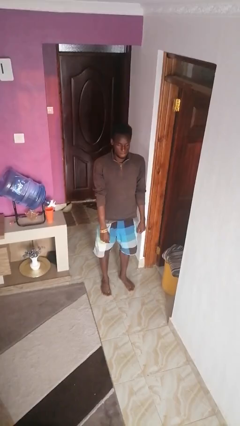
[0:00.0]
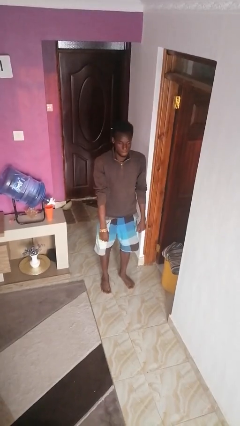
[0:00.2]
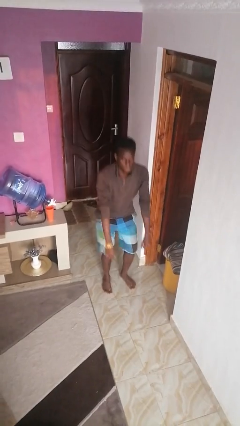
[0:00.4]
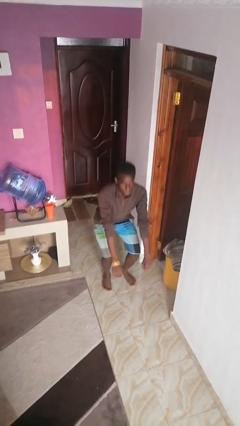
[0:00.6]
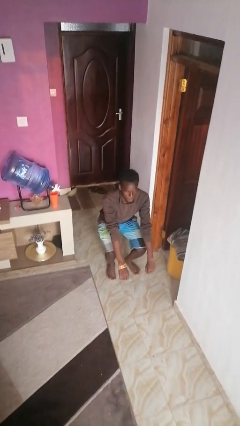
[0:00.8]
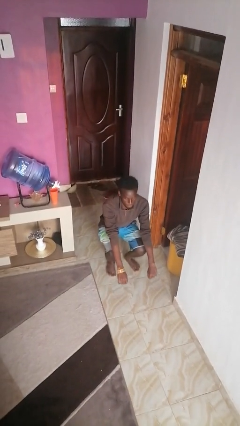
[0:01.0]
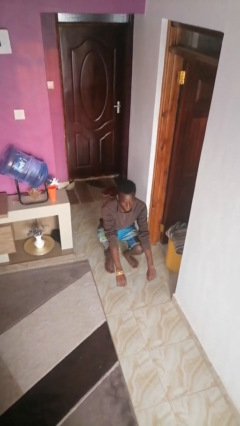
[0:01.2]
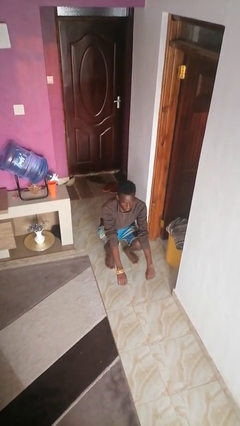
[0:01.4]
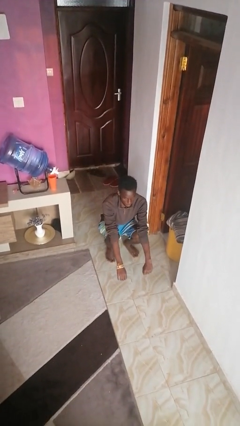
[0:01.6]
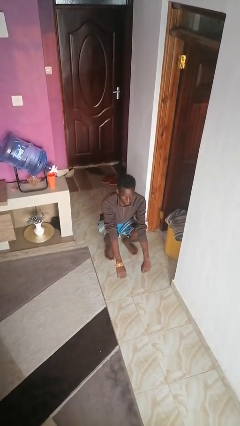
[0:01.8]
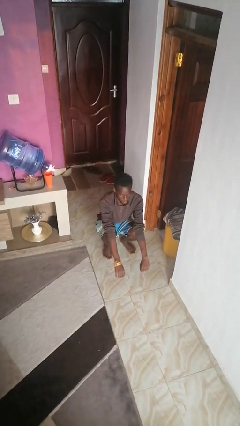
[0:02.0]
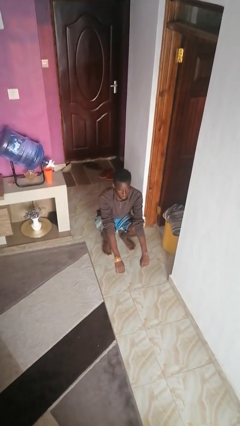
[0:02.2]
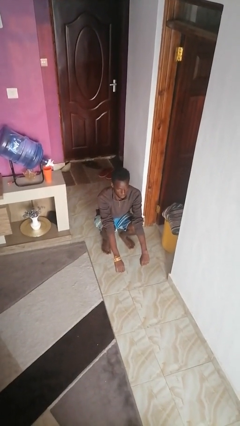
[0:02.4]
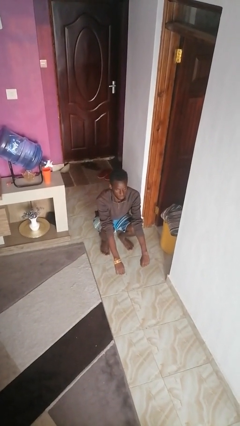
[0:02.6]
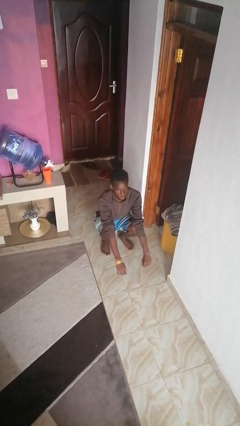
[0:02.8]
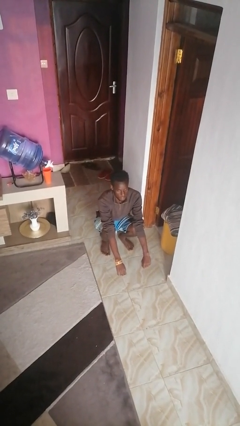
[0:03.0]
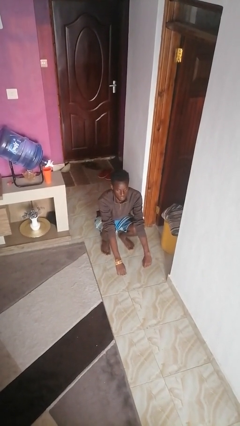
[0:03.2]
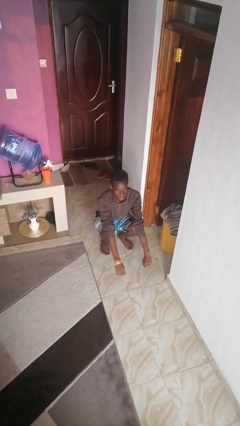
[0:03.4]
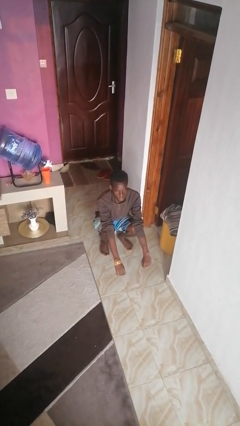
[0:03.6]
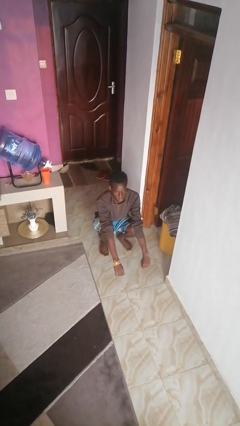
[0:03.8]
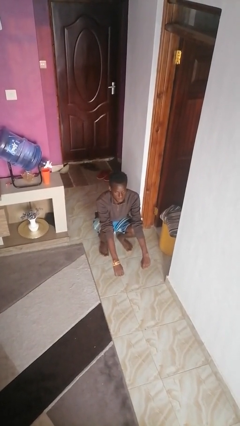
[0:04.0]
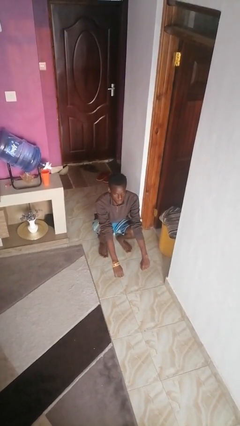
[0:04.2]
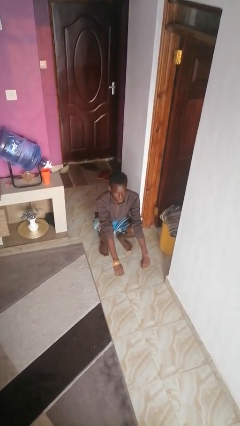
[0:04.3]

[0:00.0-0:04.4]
person squats

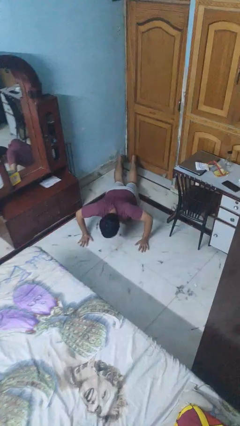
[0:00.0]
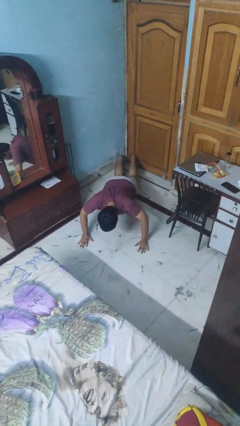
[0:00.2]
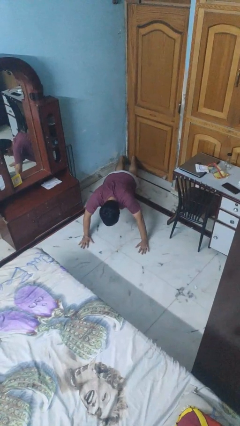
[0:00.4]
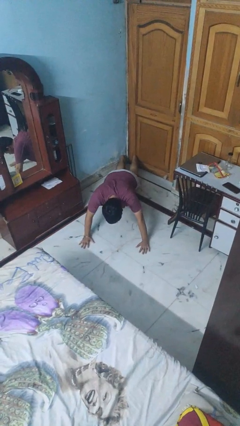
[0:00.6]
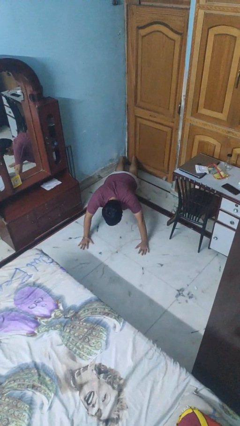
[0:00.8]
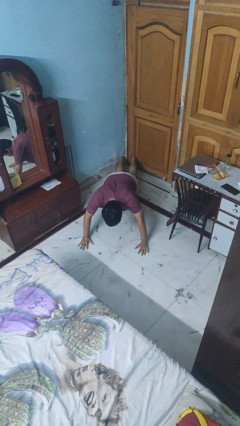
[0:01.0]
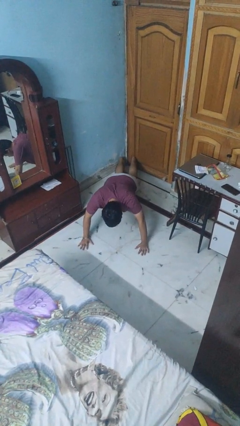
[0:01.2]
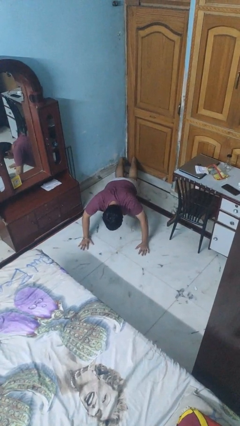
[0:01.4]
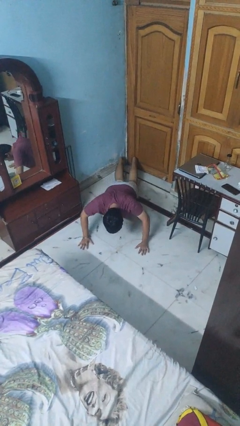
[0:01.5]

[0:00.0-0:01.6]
person exercises with pushup

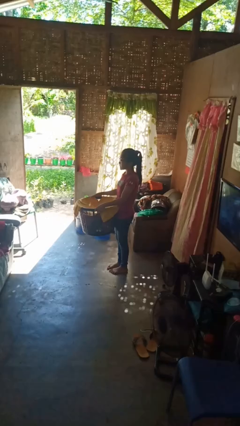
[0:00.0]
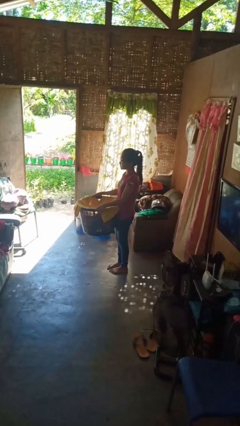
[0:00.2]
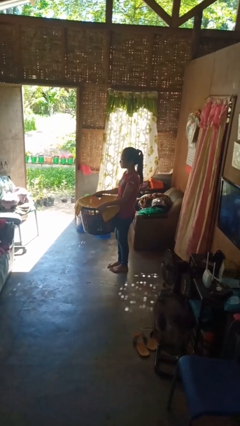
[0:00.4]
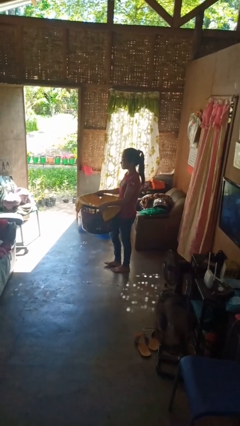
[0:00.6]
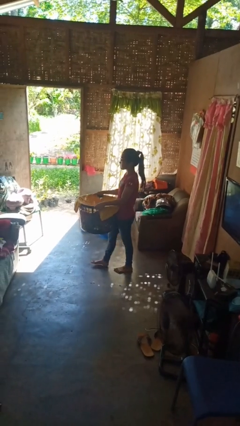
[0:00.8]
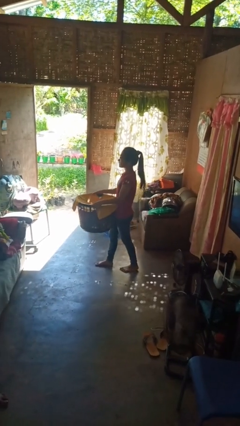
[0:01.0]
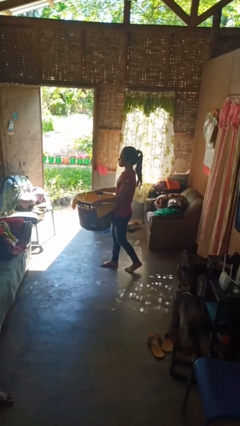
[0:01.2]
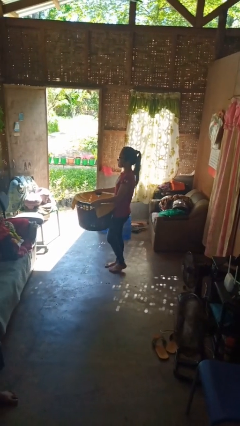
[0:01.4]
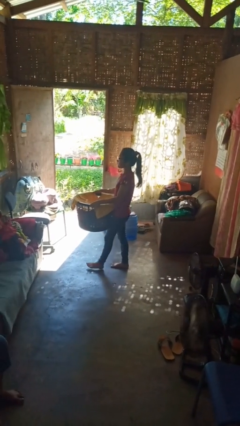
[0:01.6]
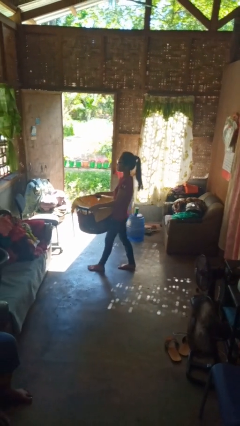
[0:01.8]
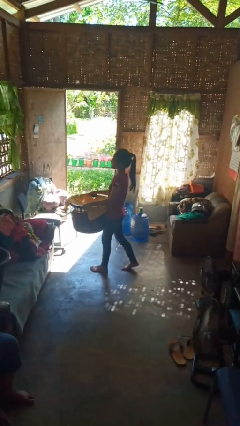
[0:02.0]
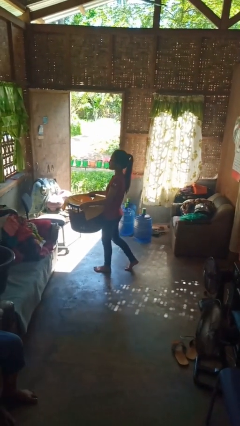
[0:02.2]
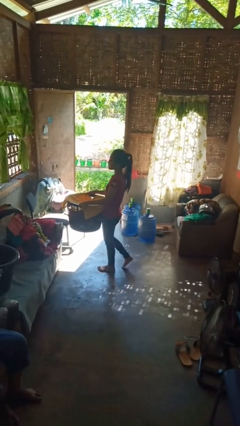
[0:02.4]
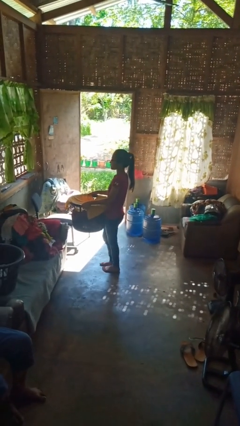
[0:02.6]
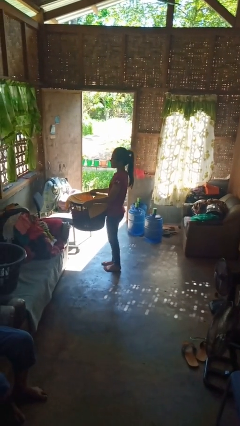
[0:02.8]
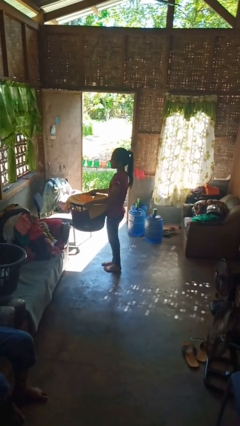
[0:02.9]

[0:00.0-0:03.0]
person carries laundry basket

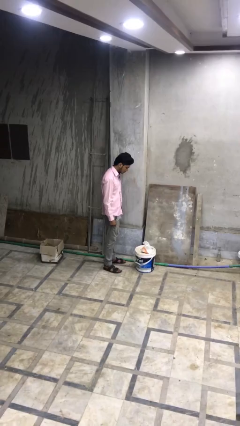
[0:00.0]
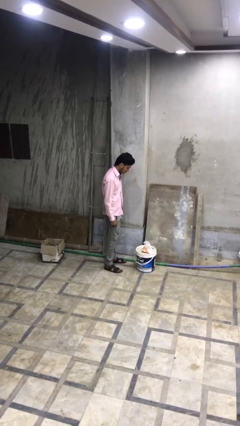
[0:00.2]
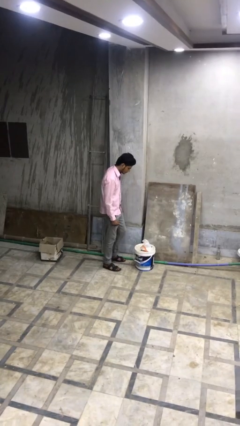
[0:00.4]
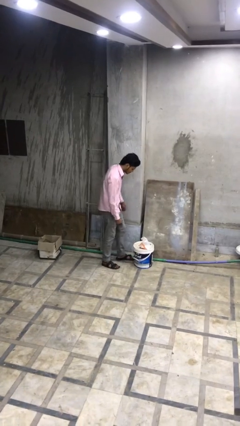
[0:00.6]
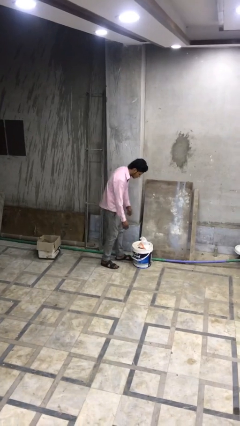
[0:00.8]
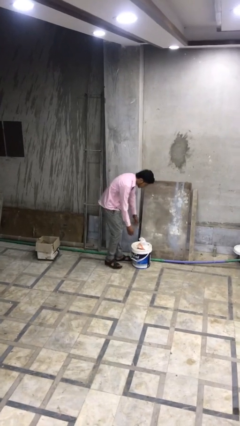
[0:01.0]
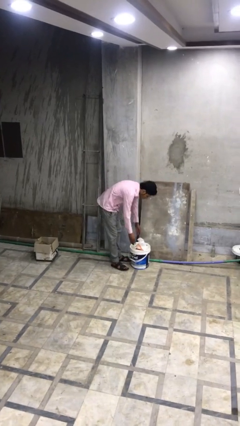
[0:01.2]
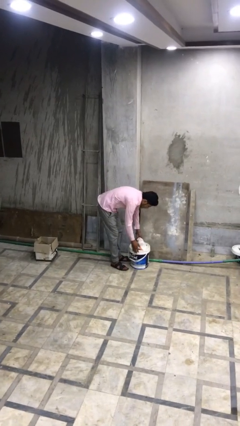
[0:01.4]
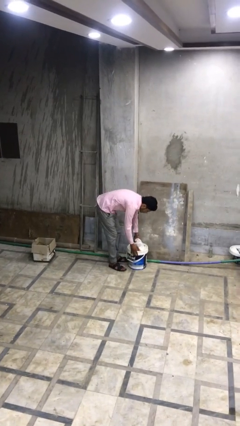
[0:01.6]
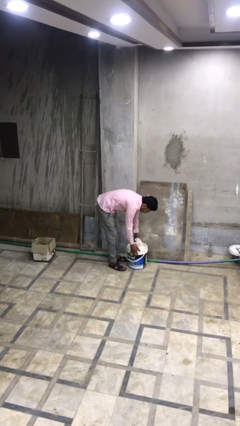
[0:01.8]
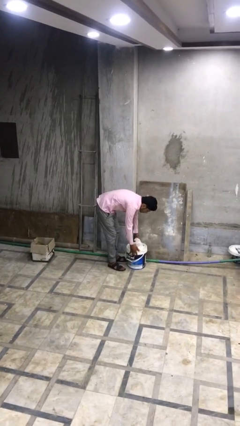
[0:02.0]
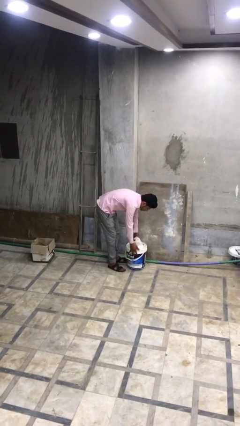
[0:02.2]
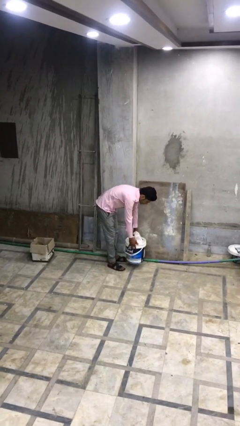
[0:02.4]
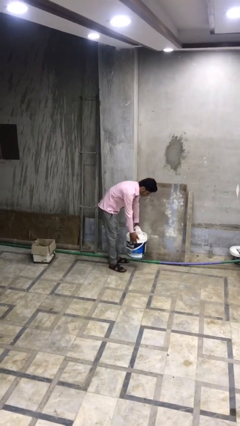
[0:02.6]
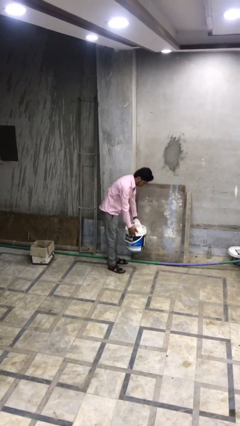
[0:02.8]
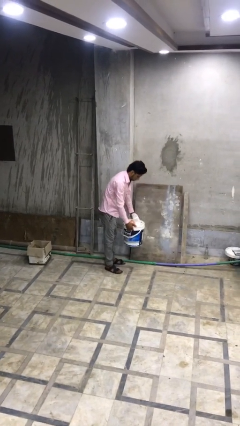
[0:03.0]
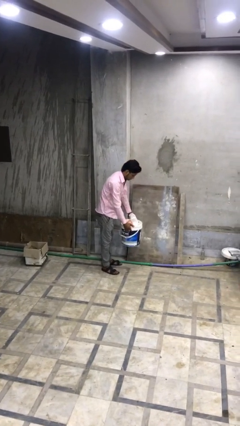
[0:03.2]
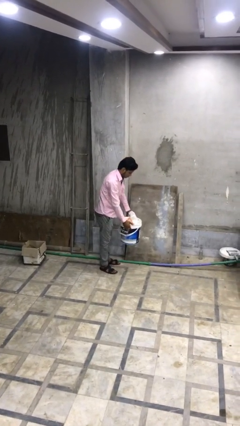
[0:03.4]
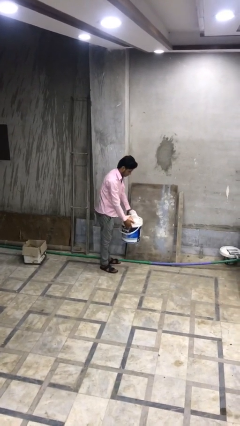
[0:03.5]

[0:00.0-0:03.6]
person picks up object from floor

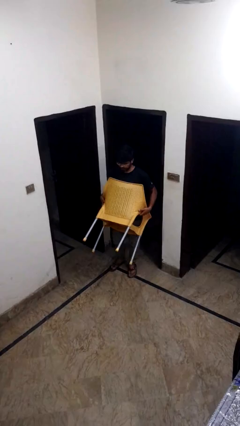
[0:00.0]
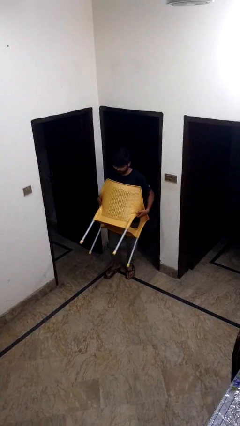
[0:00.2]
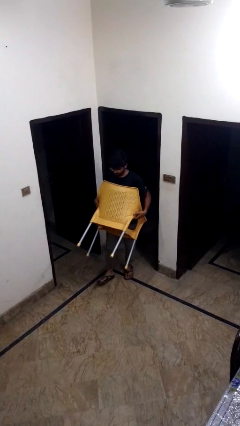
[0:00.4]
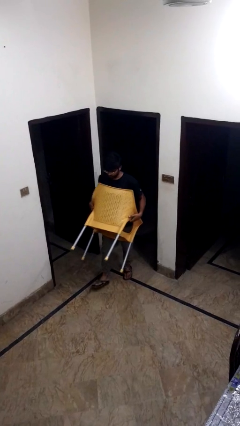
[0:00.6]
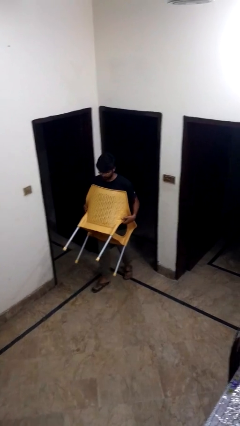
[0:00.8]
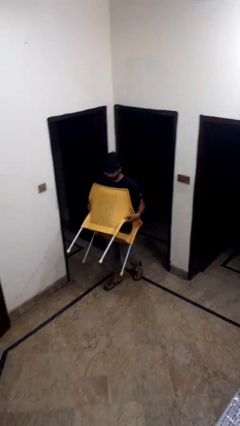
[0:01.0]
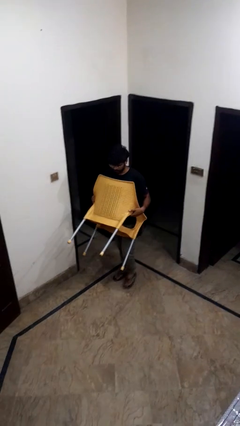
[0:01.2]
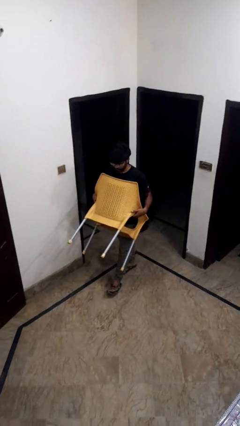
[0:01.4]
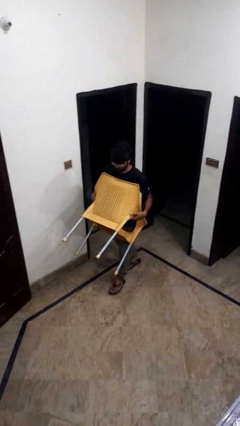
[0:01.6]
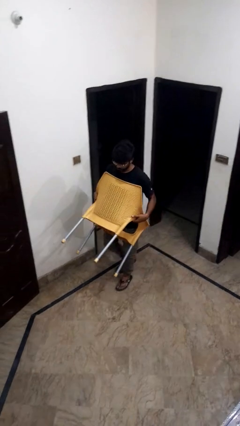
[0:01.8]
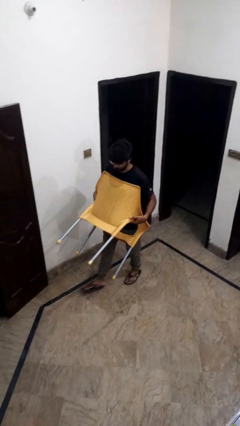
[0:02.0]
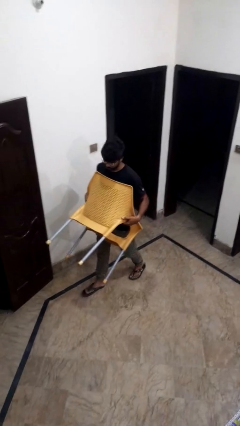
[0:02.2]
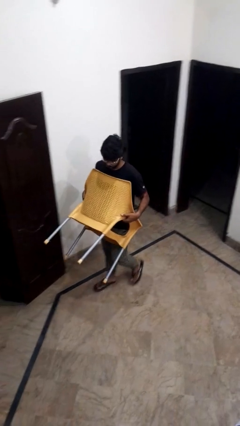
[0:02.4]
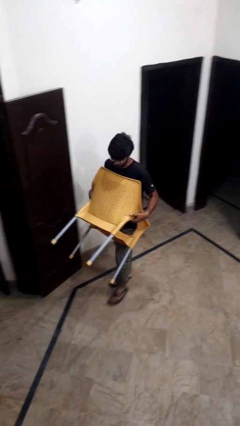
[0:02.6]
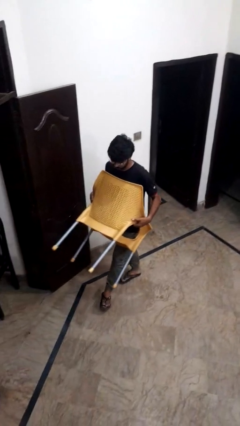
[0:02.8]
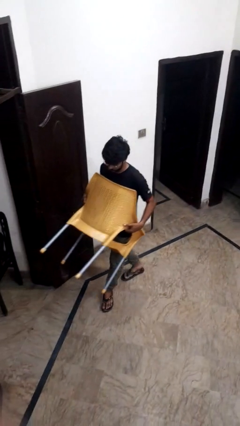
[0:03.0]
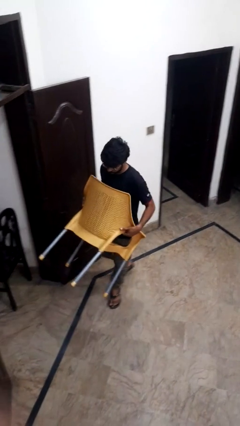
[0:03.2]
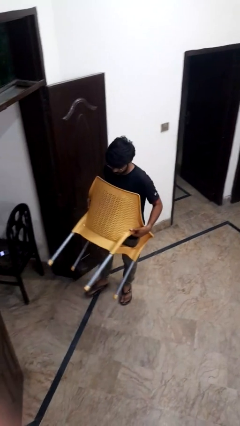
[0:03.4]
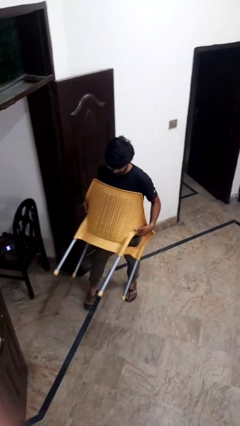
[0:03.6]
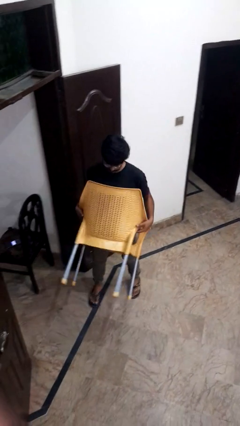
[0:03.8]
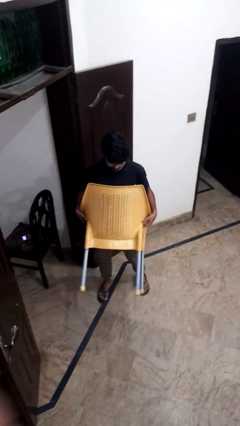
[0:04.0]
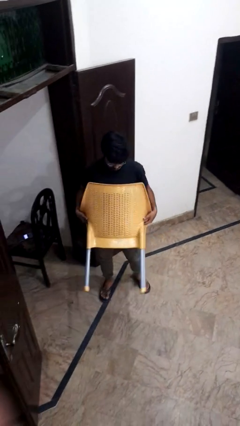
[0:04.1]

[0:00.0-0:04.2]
person carries furniture

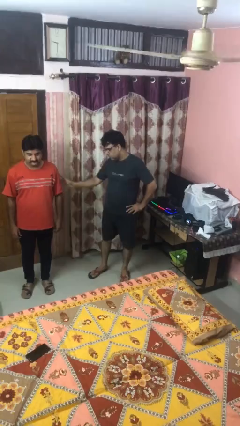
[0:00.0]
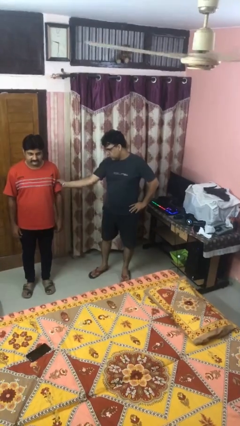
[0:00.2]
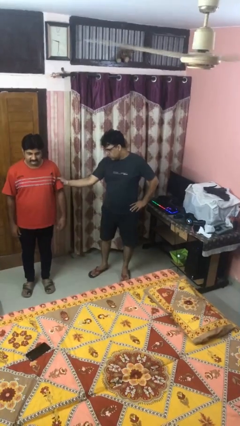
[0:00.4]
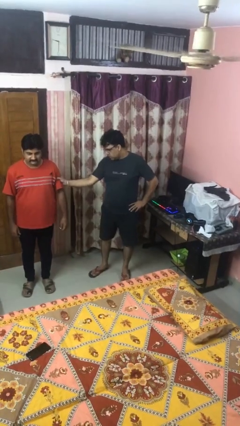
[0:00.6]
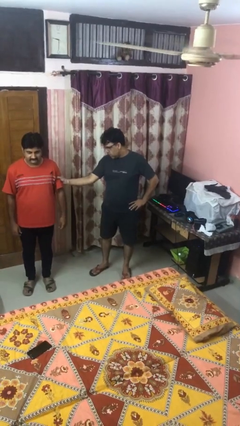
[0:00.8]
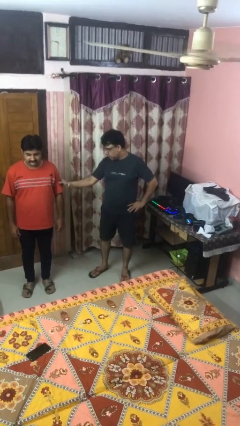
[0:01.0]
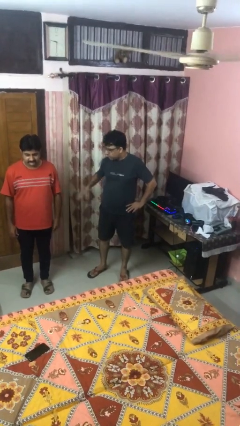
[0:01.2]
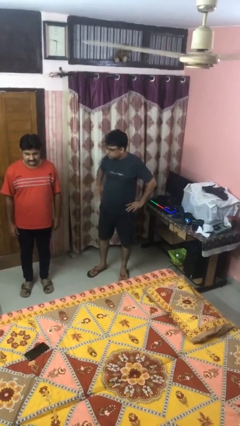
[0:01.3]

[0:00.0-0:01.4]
person grabs person by bicep
